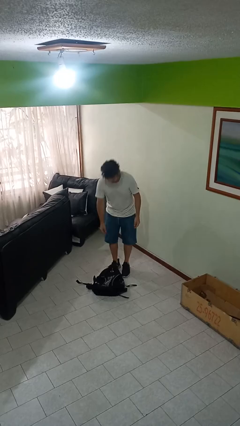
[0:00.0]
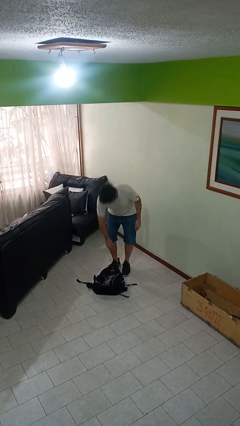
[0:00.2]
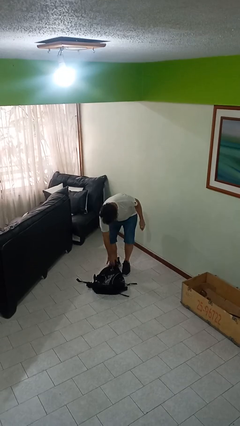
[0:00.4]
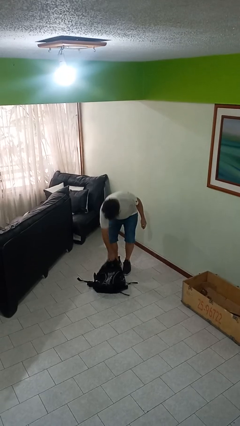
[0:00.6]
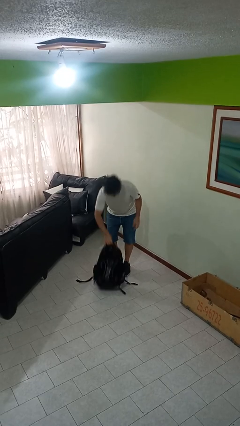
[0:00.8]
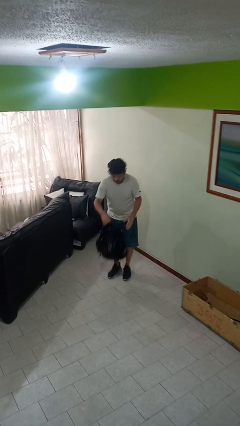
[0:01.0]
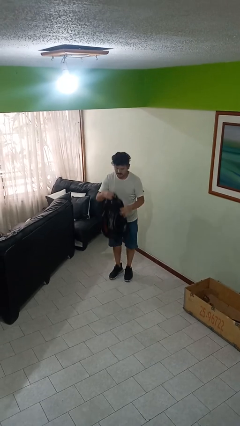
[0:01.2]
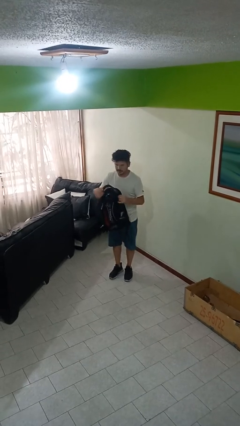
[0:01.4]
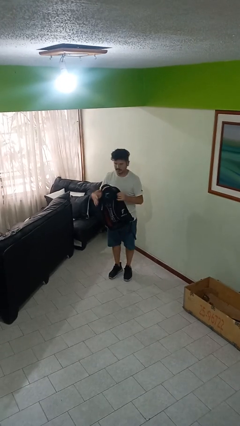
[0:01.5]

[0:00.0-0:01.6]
person picks up object from floor

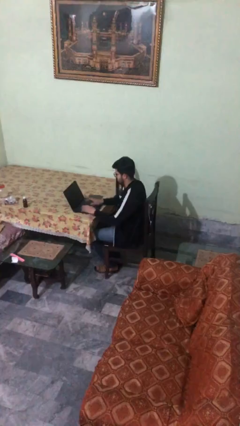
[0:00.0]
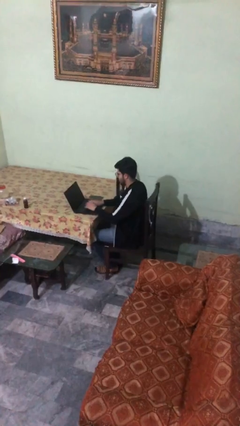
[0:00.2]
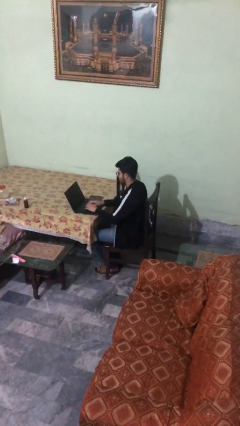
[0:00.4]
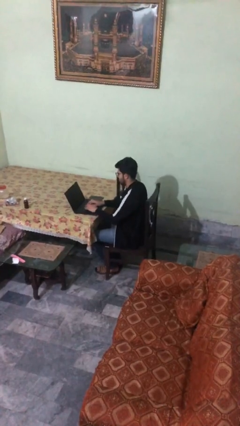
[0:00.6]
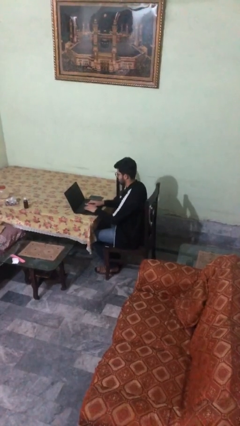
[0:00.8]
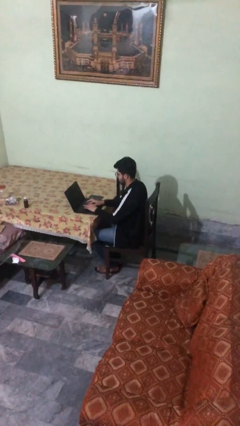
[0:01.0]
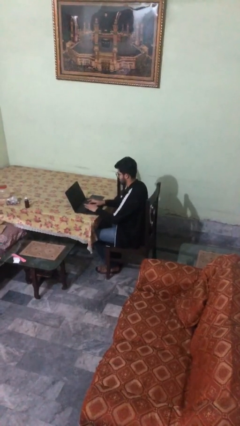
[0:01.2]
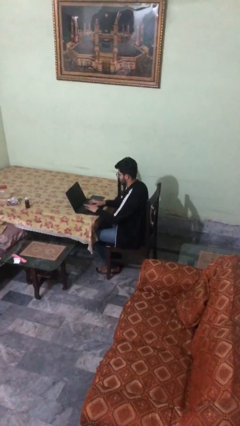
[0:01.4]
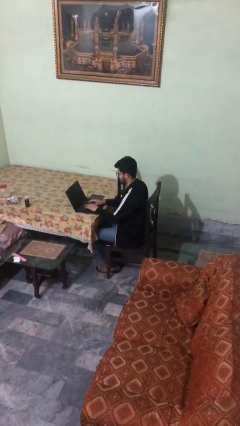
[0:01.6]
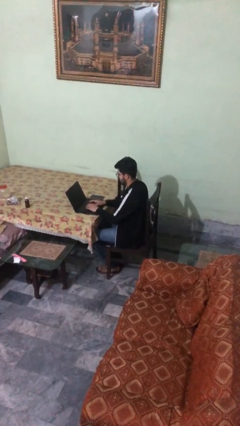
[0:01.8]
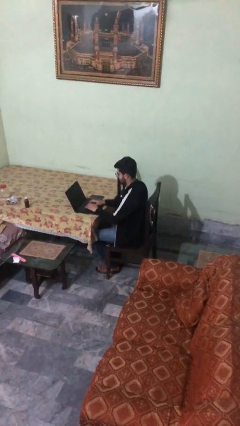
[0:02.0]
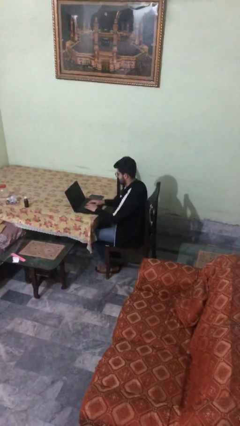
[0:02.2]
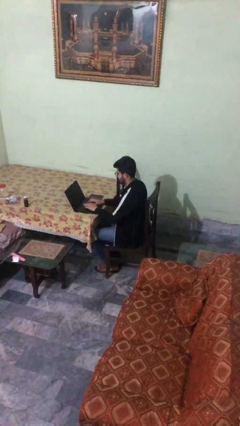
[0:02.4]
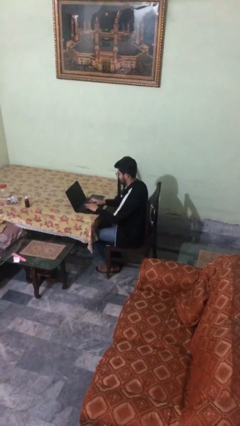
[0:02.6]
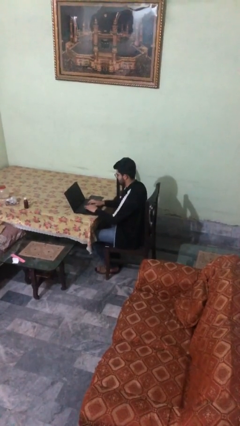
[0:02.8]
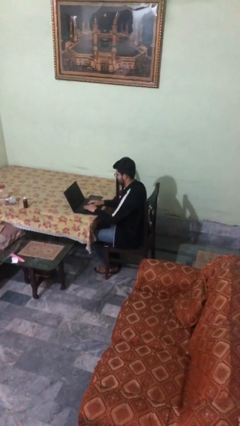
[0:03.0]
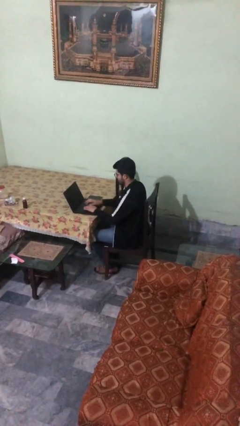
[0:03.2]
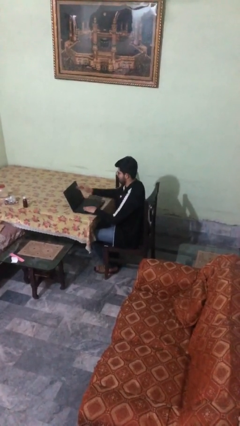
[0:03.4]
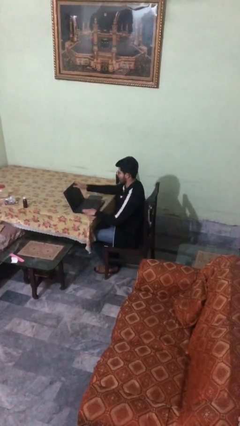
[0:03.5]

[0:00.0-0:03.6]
person interacts with laptop

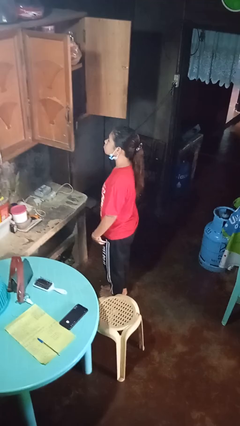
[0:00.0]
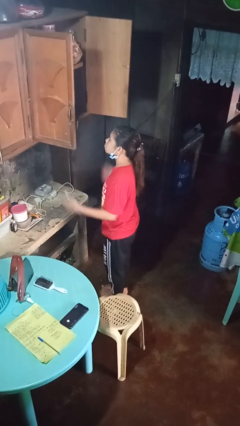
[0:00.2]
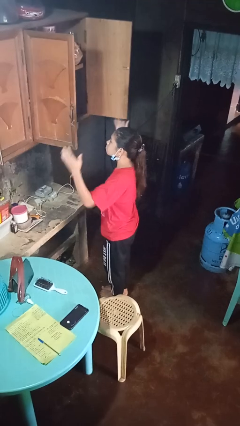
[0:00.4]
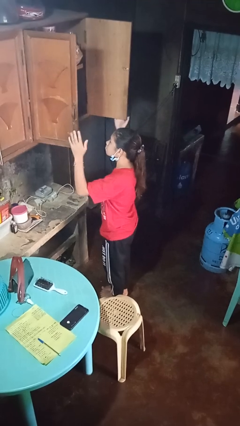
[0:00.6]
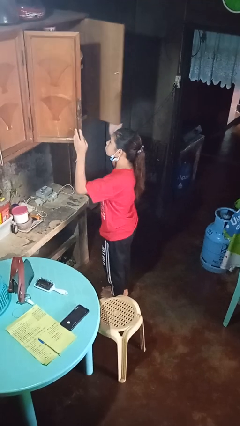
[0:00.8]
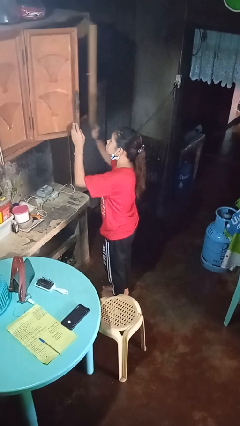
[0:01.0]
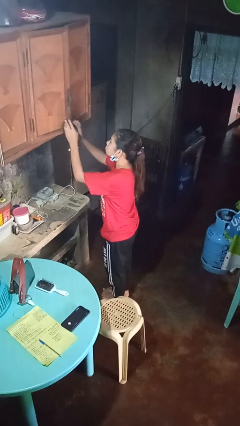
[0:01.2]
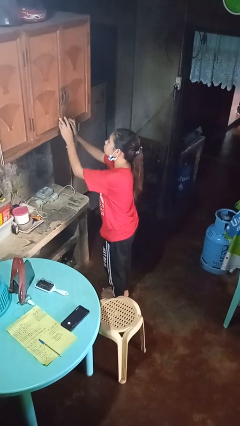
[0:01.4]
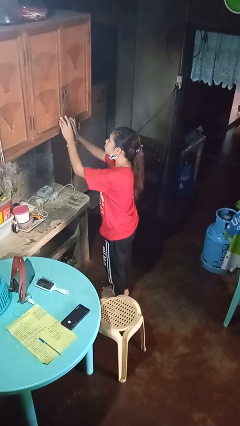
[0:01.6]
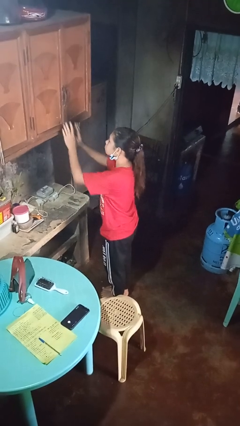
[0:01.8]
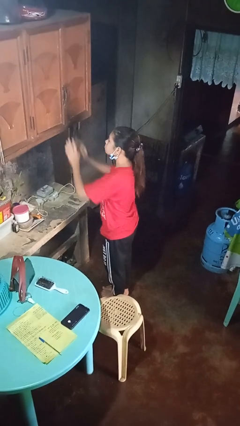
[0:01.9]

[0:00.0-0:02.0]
person closes cabinet

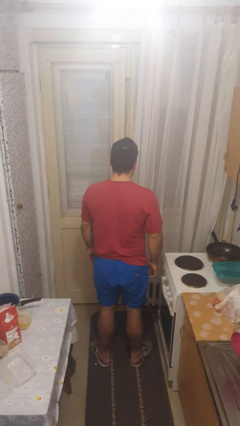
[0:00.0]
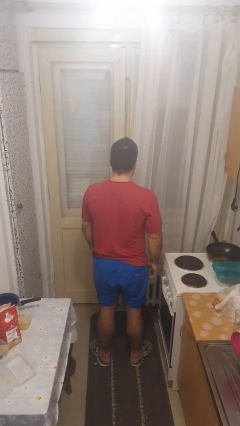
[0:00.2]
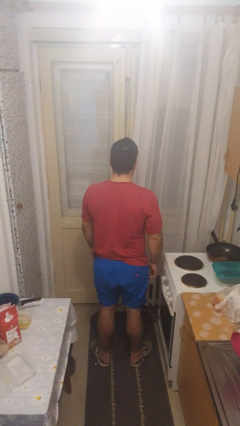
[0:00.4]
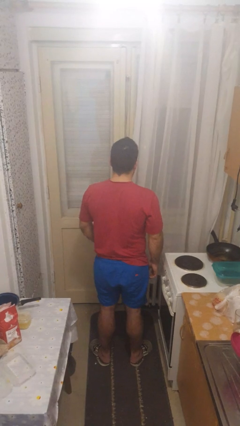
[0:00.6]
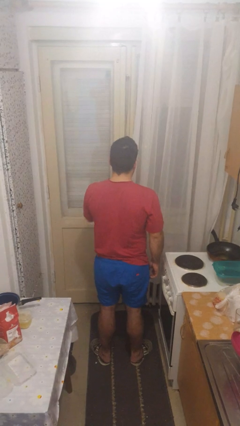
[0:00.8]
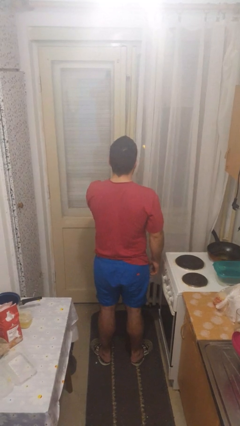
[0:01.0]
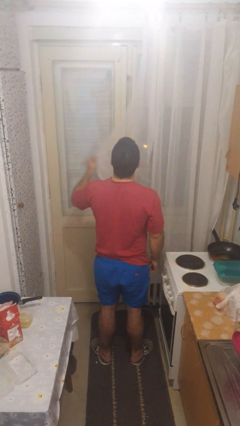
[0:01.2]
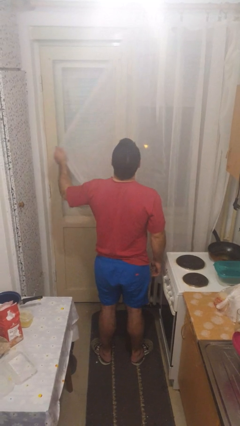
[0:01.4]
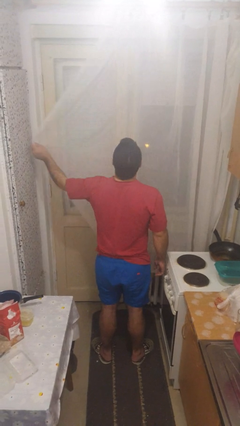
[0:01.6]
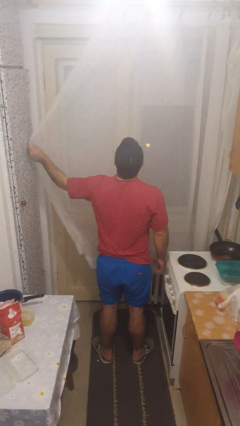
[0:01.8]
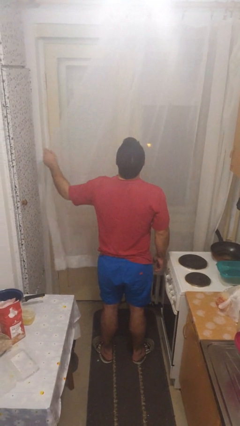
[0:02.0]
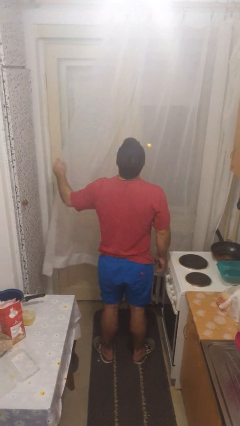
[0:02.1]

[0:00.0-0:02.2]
person closes curtains

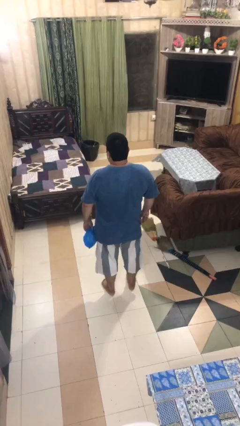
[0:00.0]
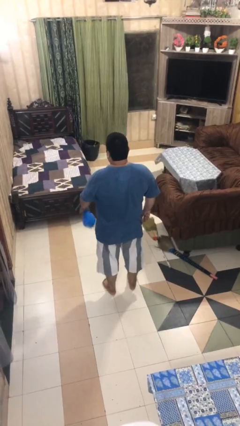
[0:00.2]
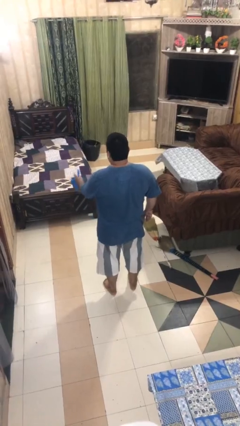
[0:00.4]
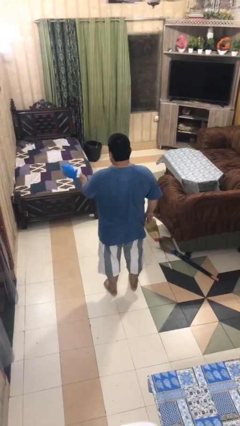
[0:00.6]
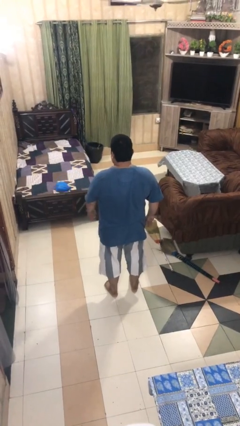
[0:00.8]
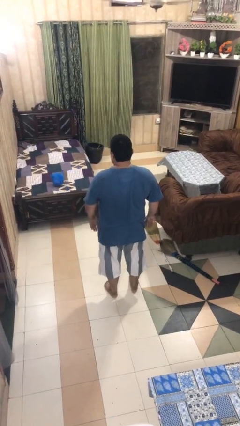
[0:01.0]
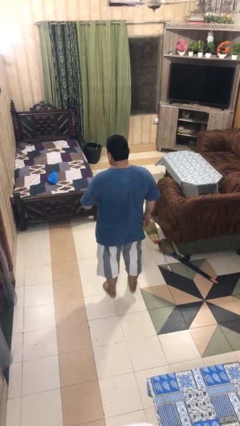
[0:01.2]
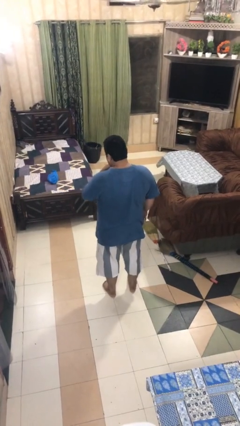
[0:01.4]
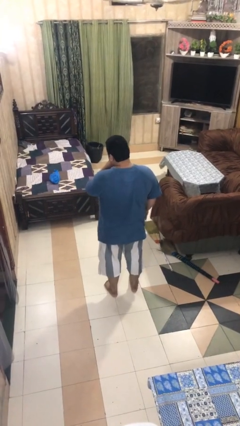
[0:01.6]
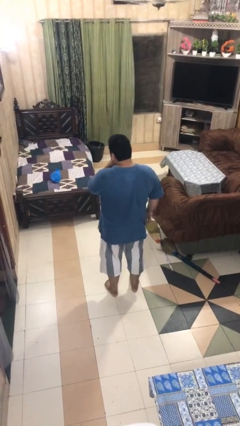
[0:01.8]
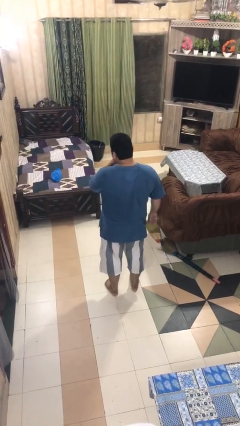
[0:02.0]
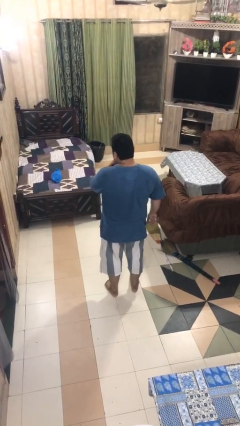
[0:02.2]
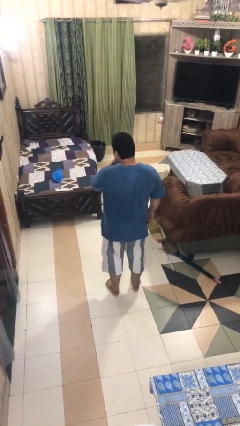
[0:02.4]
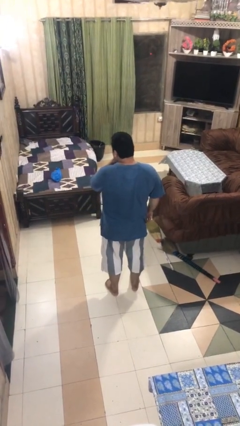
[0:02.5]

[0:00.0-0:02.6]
person throws object on bed

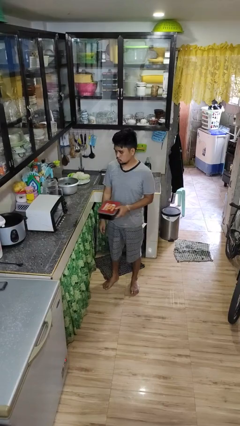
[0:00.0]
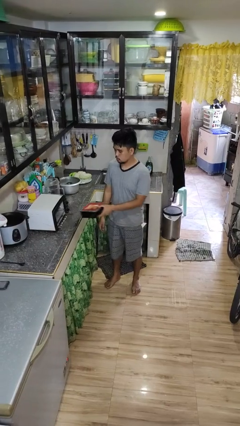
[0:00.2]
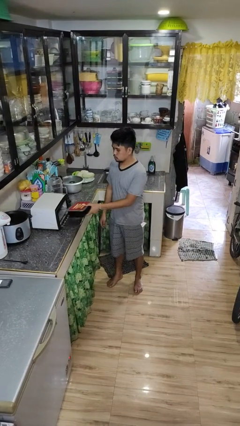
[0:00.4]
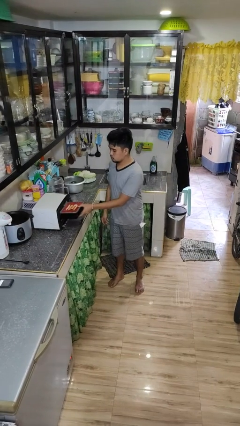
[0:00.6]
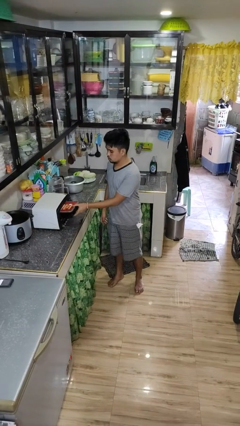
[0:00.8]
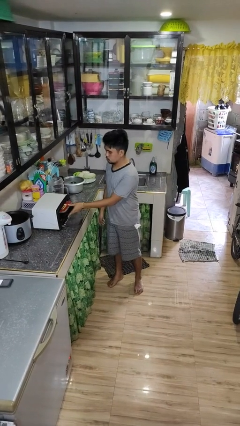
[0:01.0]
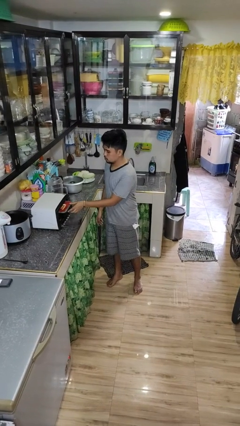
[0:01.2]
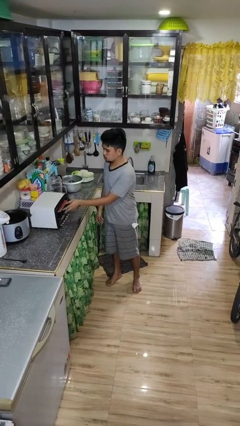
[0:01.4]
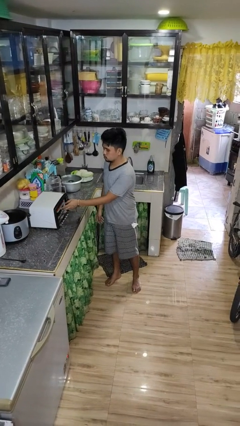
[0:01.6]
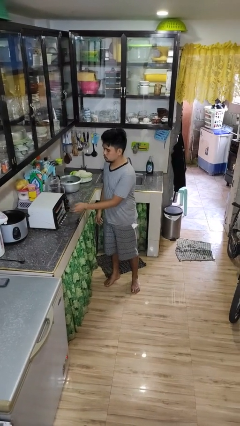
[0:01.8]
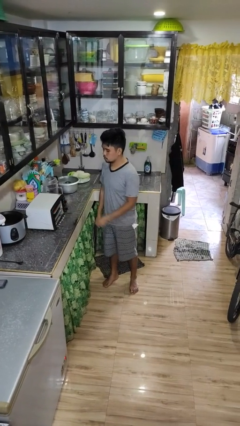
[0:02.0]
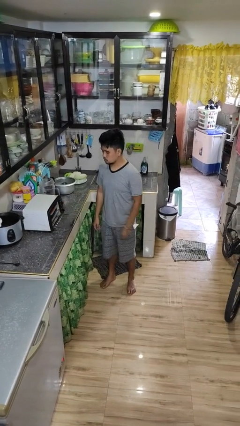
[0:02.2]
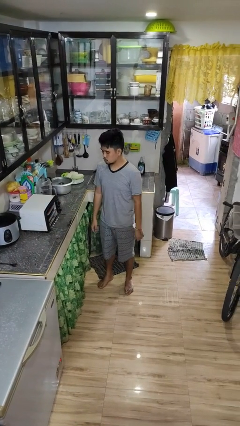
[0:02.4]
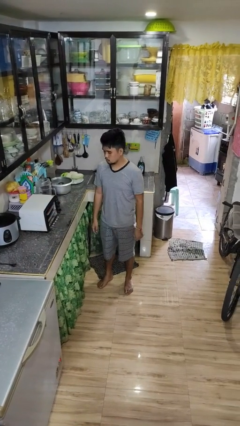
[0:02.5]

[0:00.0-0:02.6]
person puts object into microwave

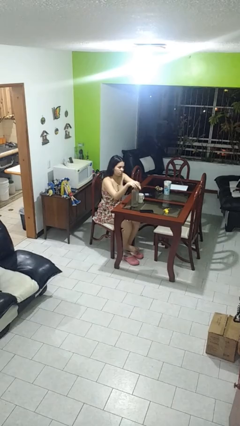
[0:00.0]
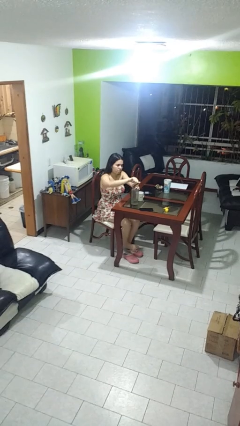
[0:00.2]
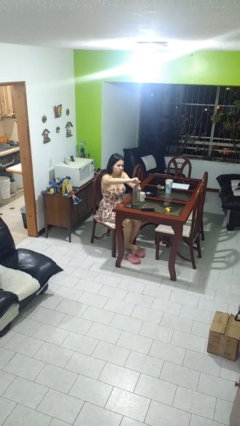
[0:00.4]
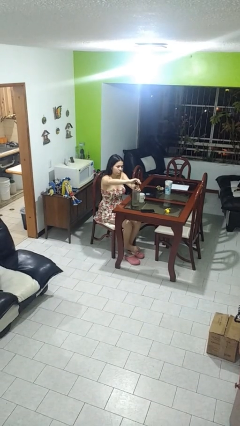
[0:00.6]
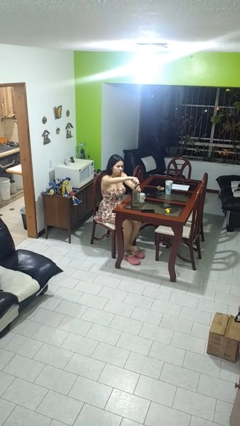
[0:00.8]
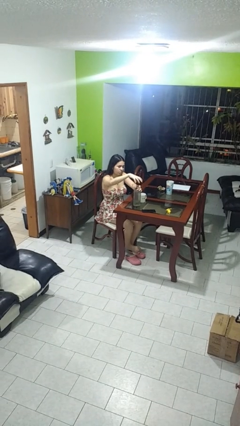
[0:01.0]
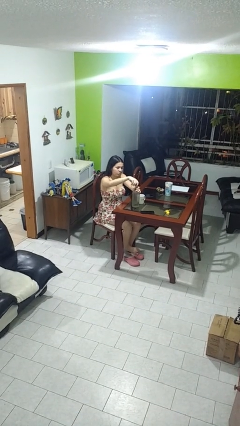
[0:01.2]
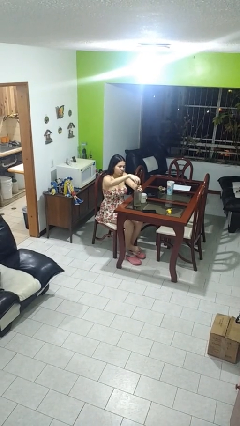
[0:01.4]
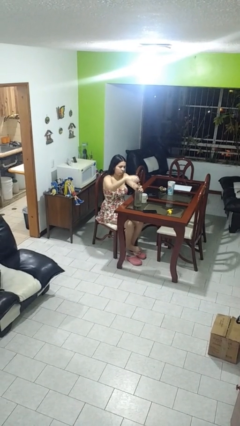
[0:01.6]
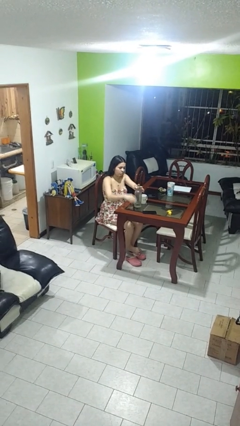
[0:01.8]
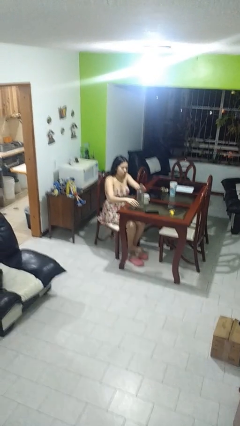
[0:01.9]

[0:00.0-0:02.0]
person unscrews lid from bottle
